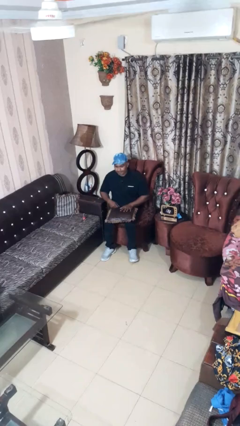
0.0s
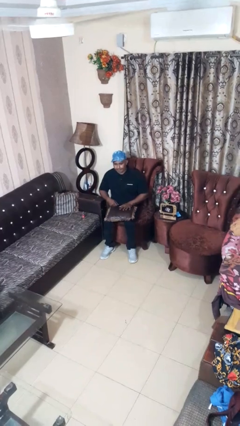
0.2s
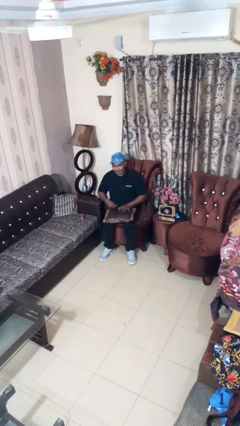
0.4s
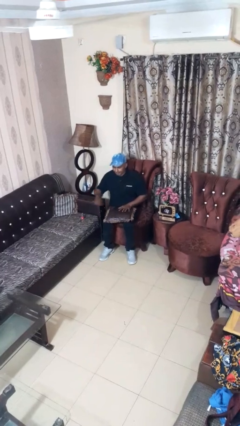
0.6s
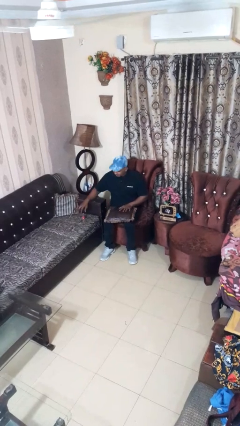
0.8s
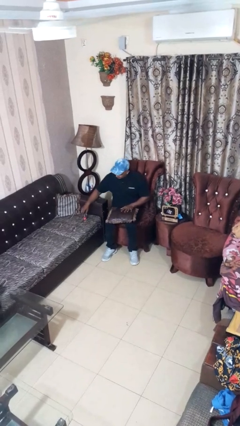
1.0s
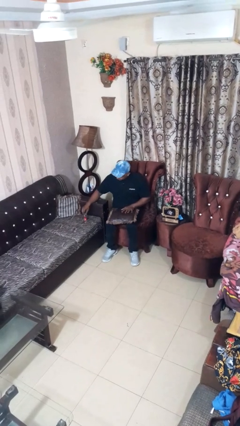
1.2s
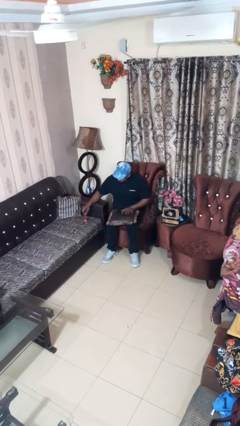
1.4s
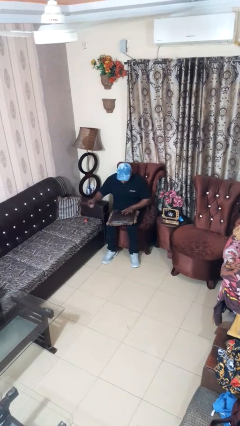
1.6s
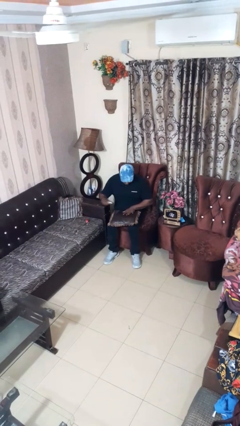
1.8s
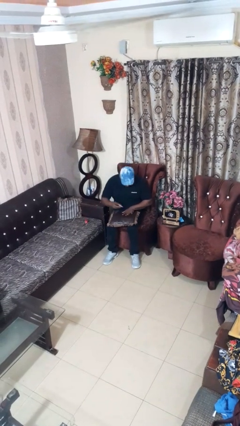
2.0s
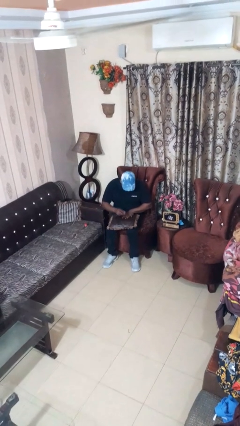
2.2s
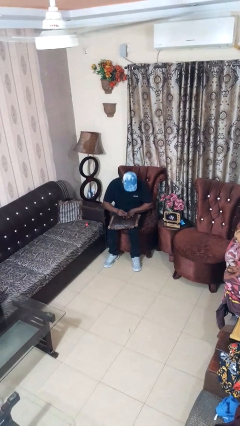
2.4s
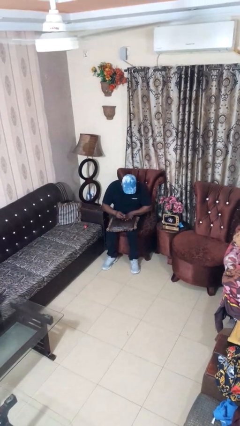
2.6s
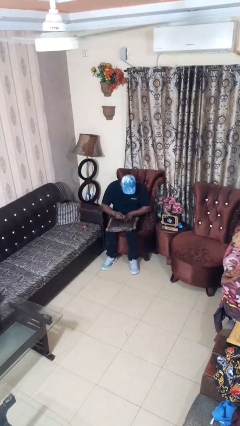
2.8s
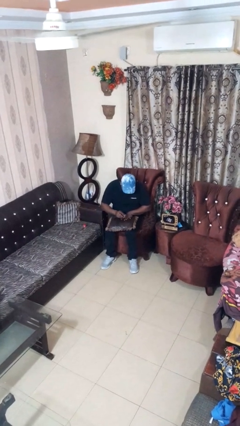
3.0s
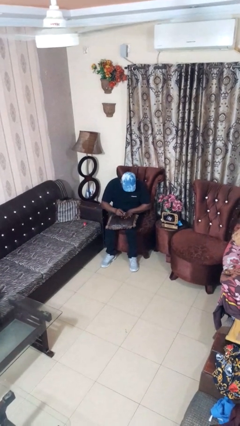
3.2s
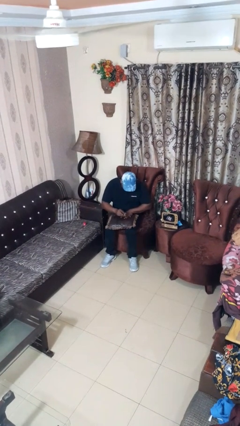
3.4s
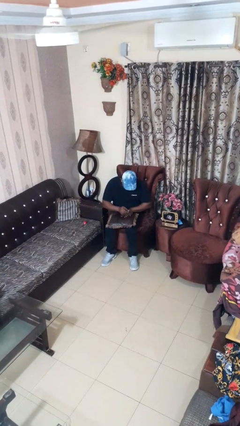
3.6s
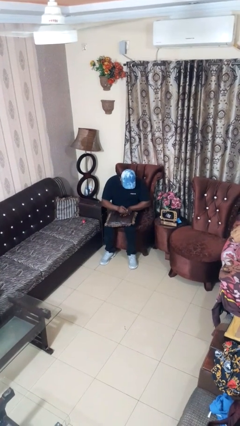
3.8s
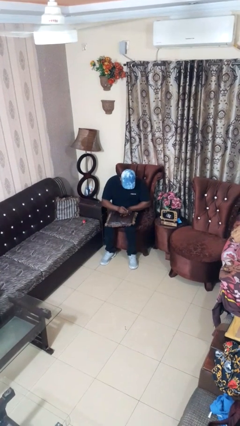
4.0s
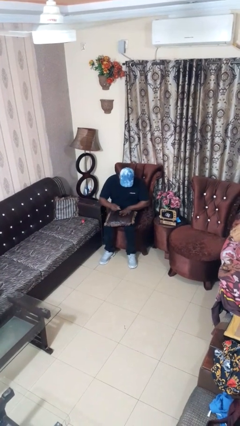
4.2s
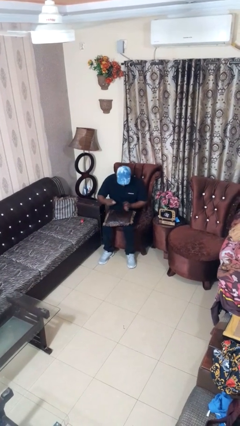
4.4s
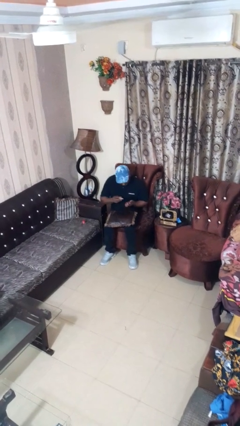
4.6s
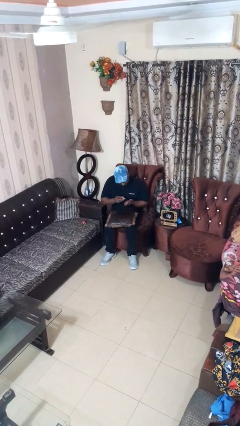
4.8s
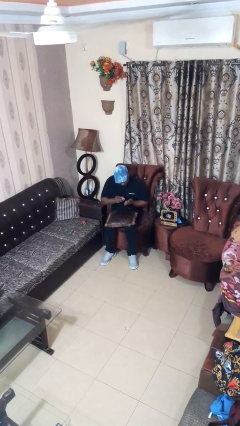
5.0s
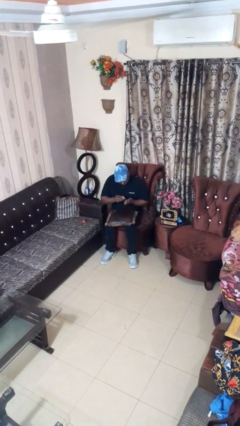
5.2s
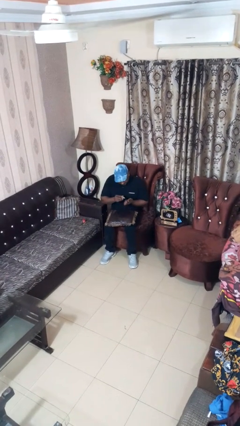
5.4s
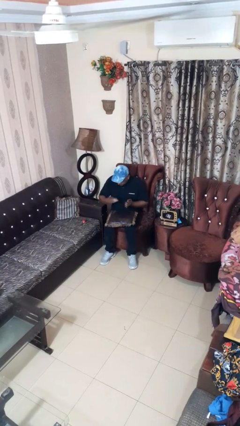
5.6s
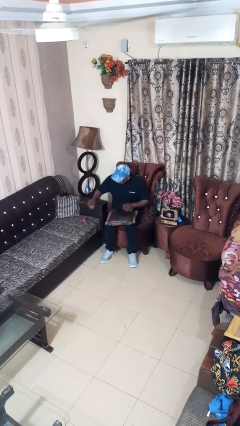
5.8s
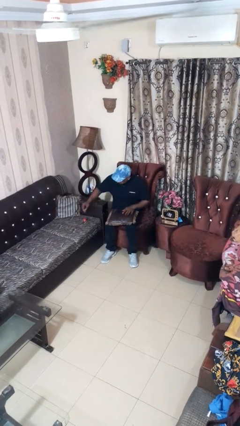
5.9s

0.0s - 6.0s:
person paints fingernails

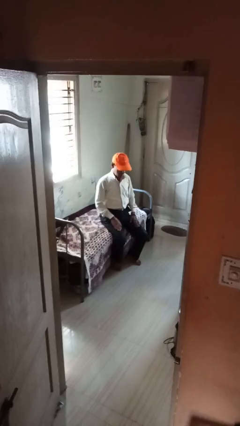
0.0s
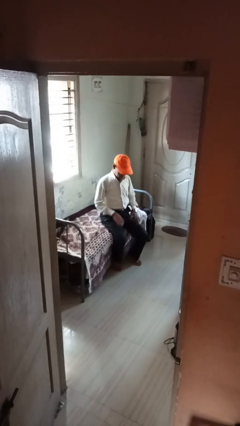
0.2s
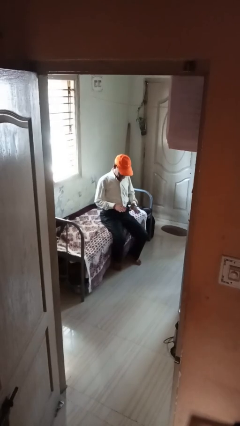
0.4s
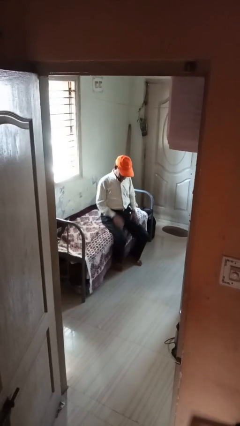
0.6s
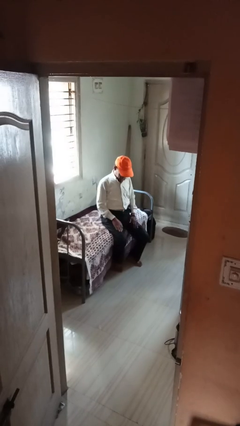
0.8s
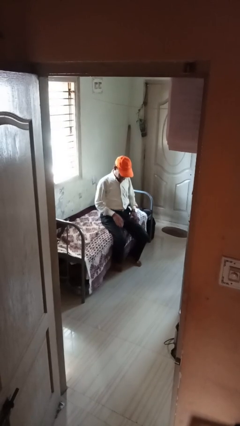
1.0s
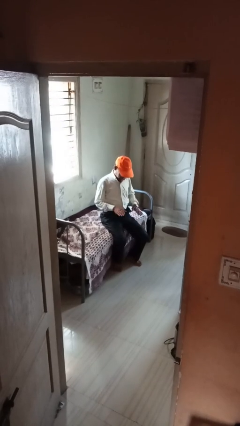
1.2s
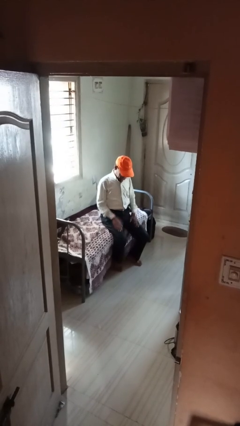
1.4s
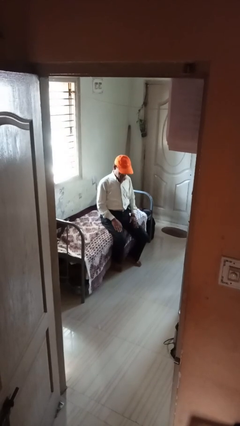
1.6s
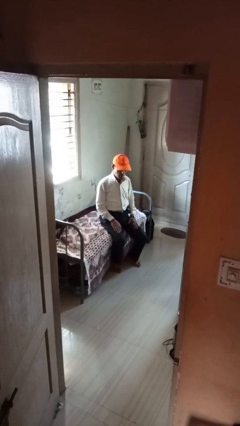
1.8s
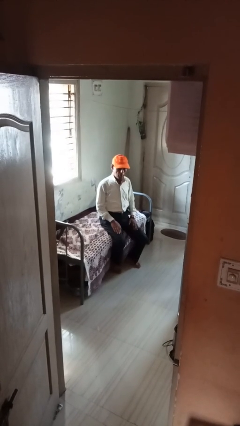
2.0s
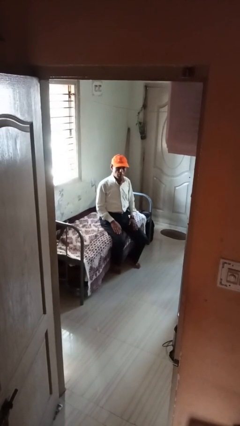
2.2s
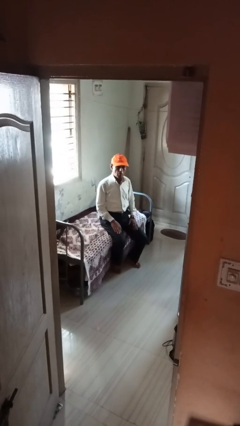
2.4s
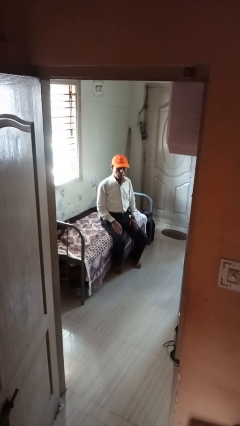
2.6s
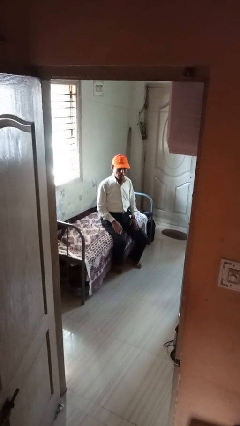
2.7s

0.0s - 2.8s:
person slaps hands on thighs

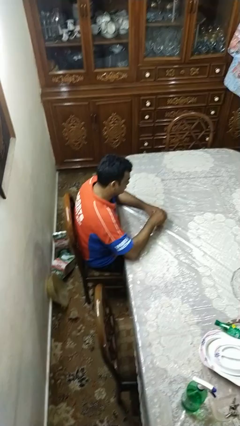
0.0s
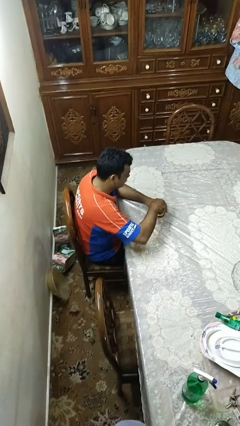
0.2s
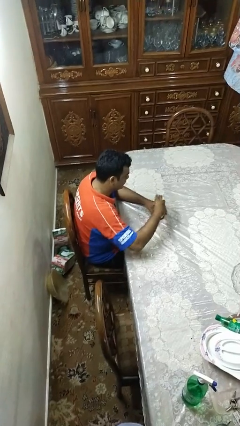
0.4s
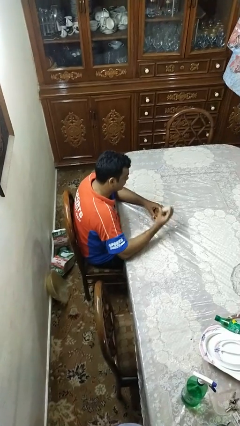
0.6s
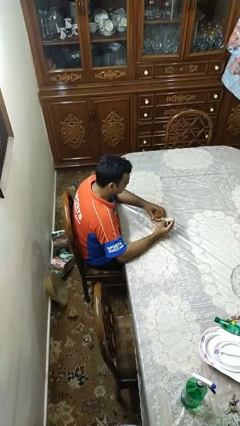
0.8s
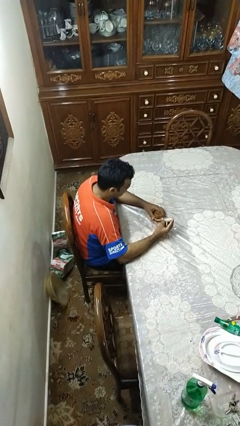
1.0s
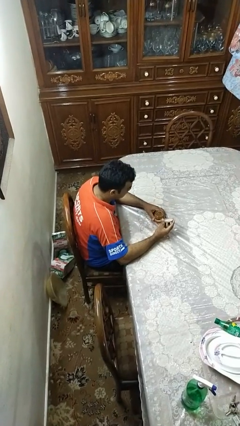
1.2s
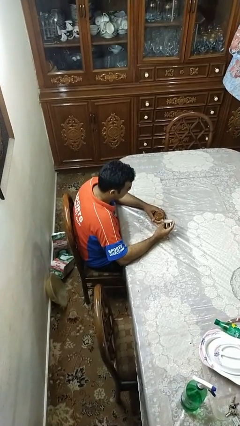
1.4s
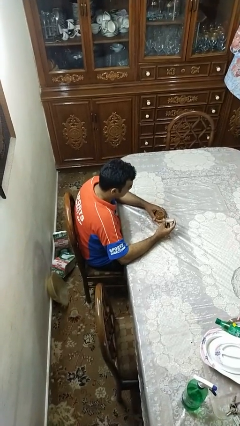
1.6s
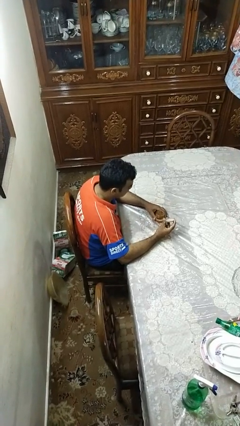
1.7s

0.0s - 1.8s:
person opens jar

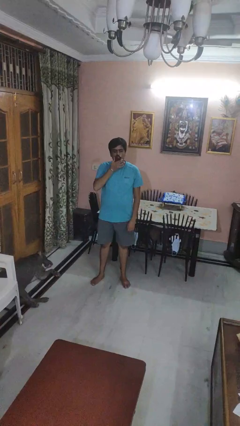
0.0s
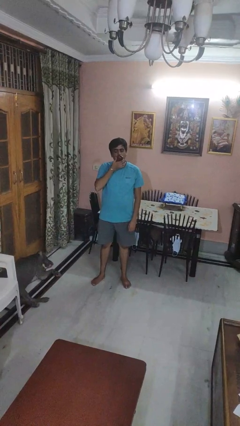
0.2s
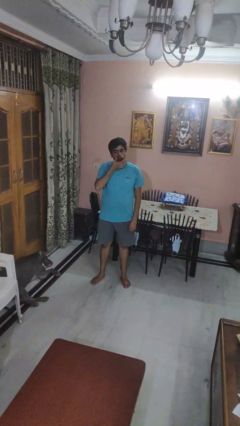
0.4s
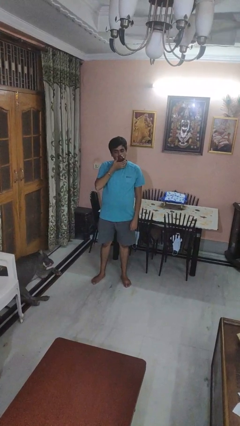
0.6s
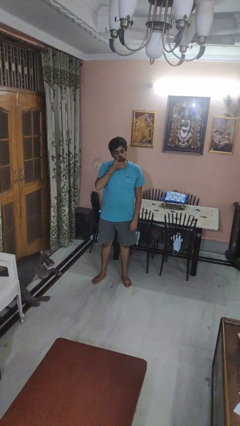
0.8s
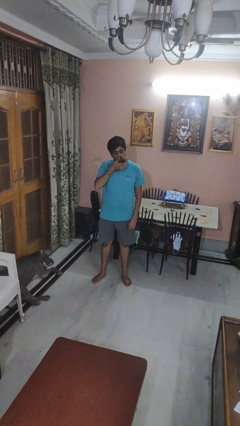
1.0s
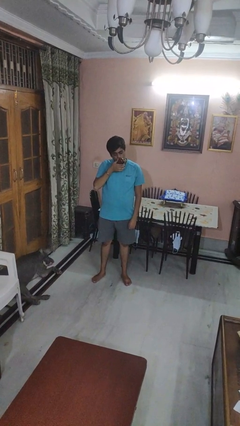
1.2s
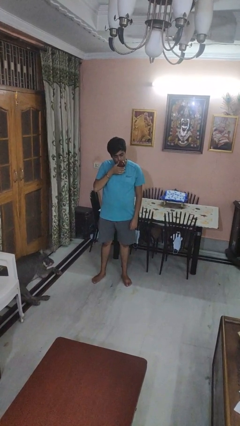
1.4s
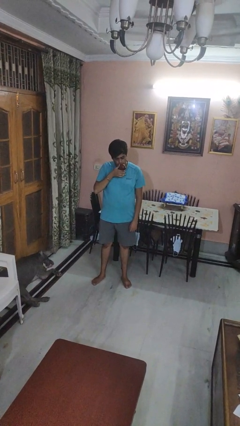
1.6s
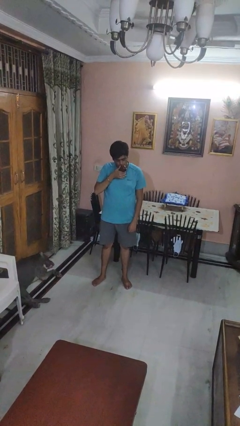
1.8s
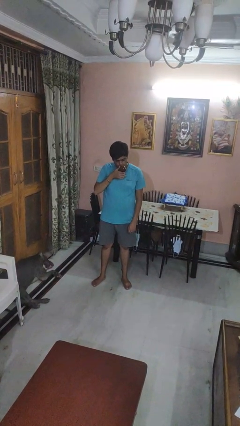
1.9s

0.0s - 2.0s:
person eats apple

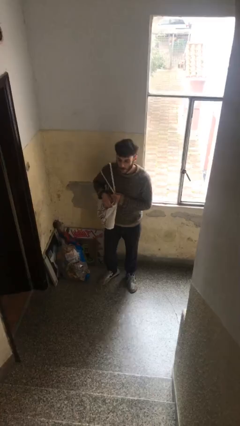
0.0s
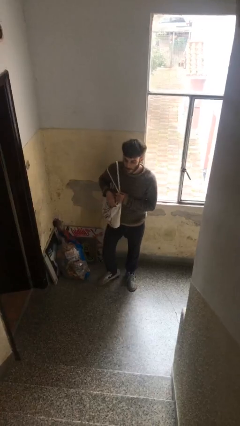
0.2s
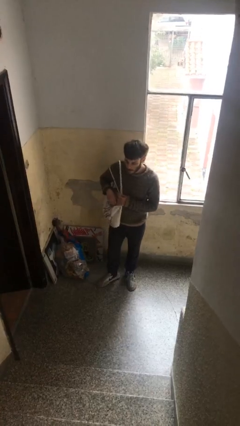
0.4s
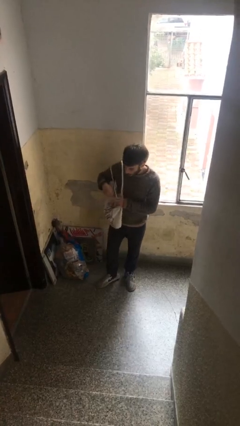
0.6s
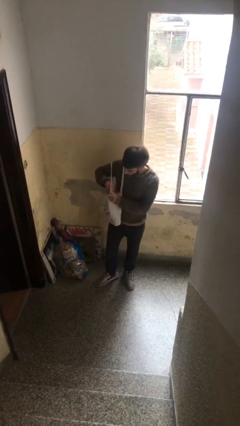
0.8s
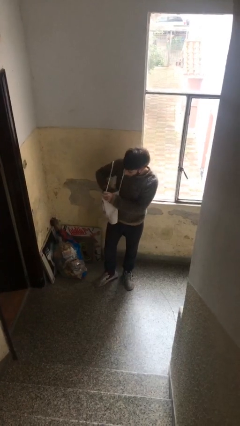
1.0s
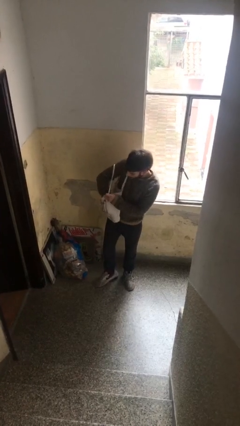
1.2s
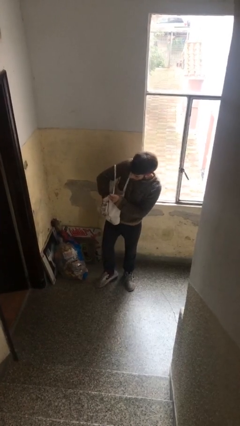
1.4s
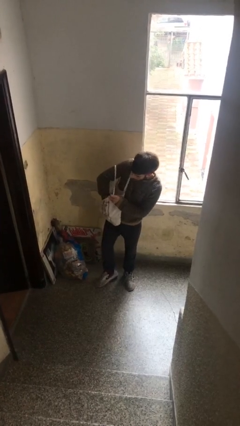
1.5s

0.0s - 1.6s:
person searches in purse

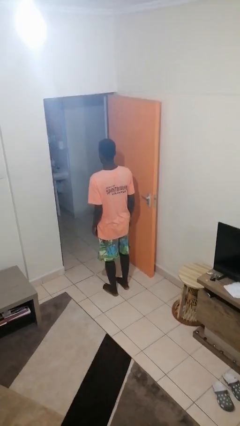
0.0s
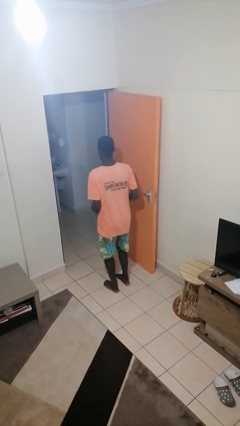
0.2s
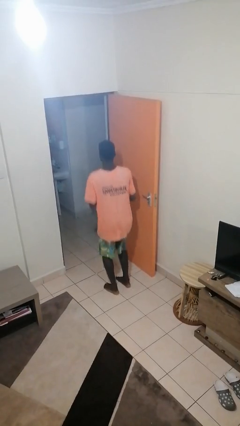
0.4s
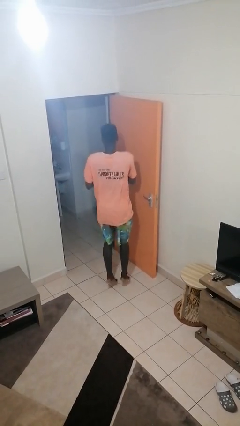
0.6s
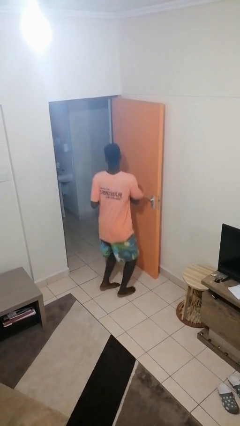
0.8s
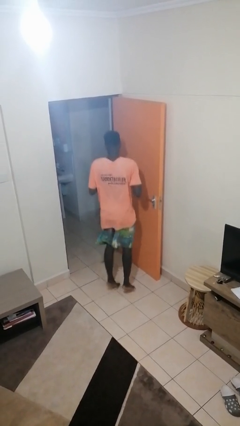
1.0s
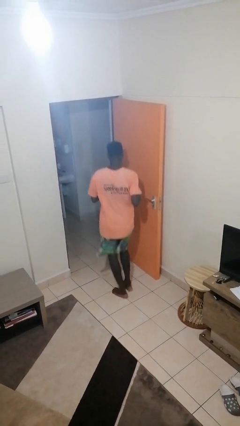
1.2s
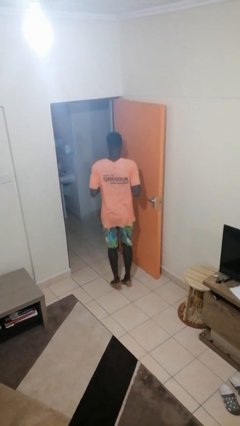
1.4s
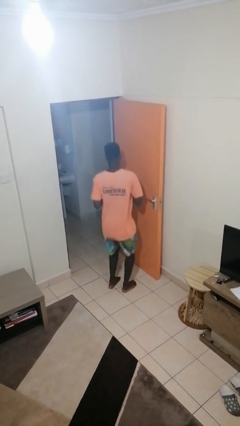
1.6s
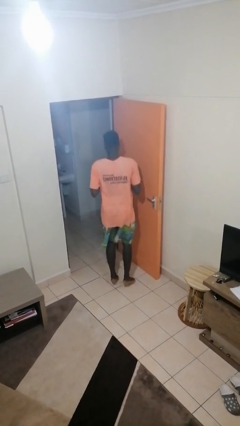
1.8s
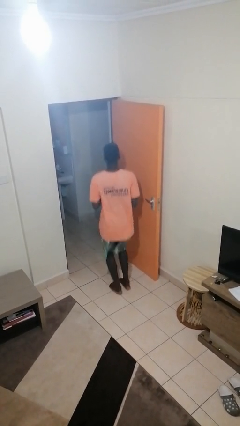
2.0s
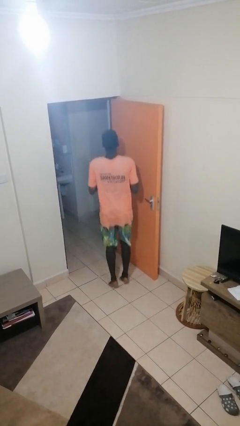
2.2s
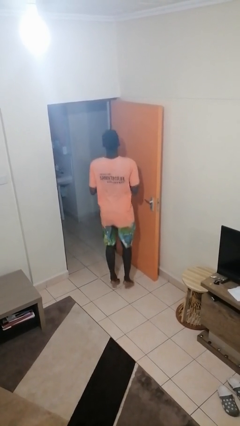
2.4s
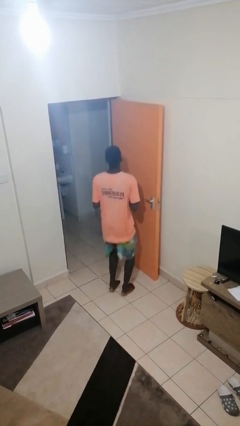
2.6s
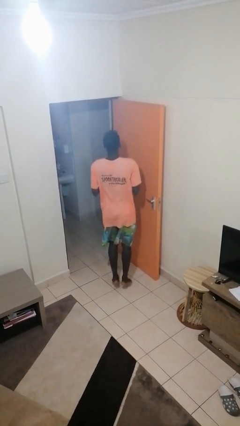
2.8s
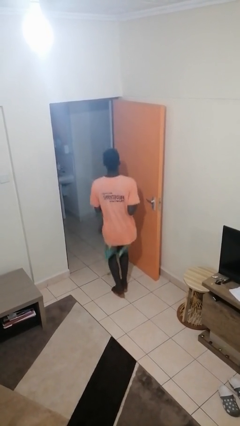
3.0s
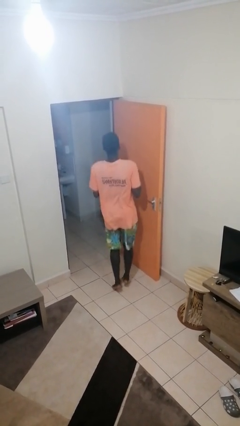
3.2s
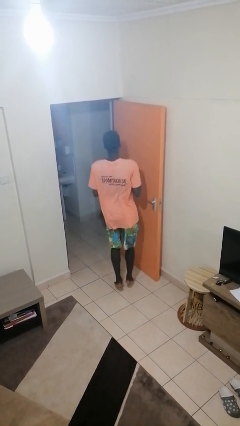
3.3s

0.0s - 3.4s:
person jumps
